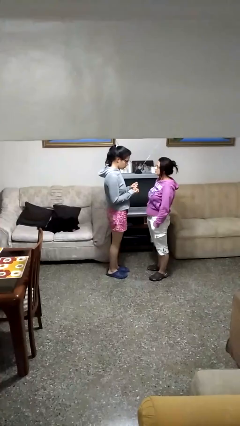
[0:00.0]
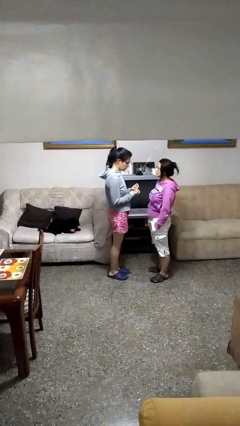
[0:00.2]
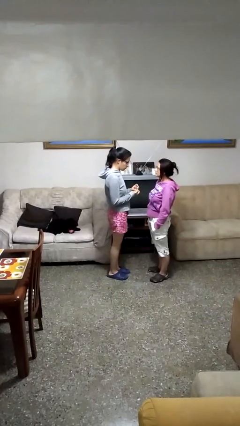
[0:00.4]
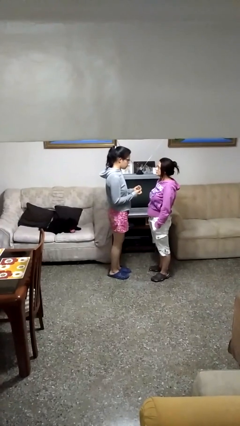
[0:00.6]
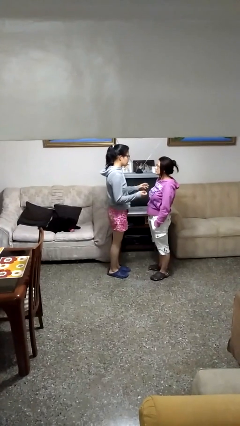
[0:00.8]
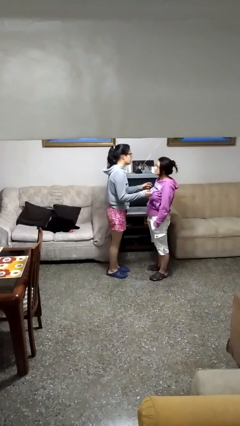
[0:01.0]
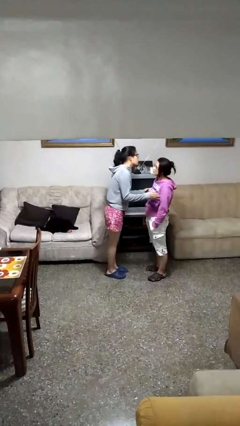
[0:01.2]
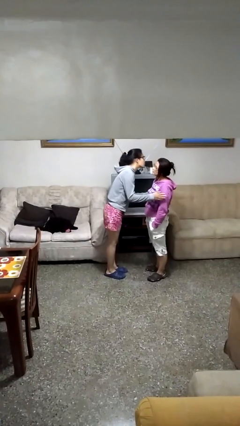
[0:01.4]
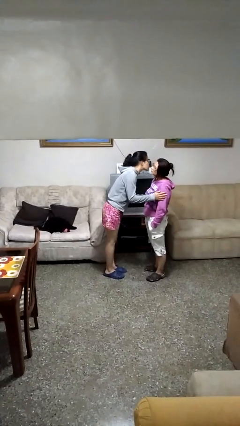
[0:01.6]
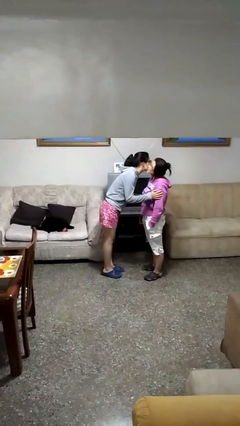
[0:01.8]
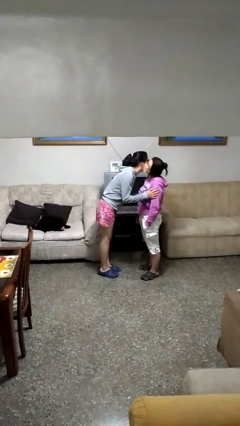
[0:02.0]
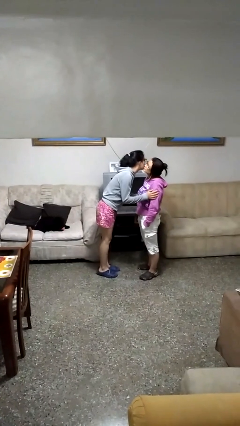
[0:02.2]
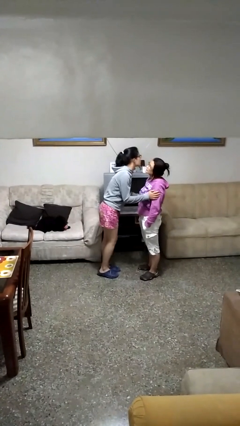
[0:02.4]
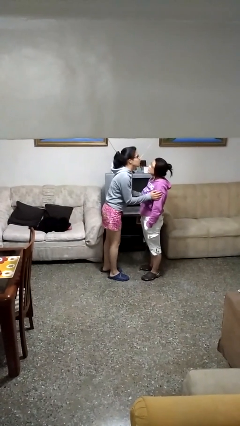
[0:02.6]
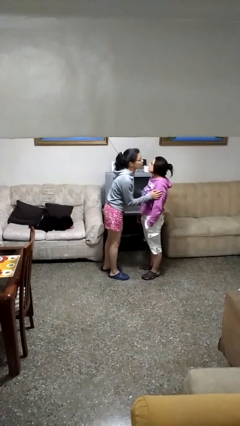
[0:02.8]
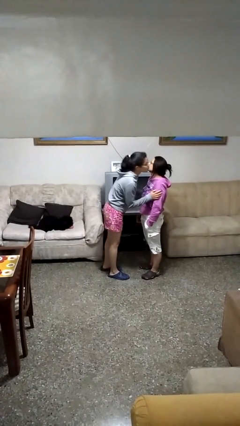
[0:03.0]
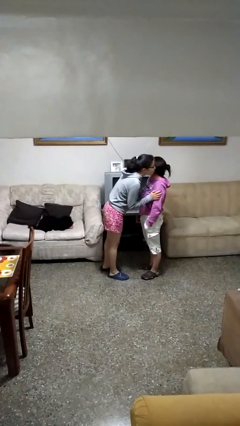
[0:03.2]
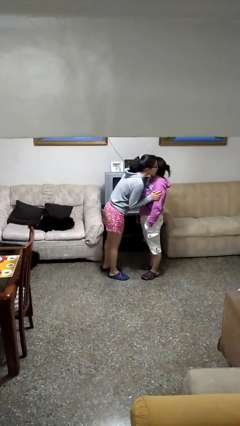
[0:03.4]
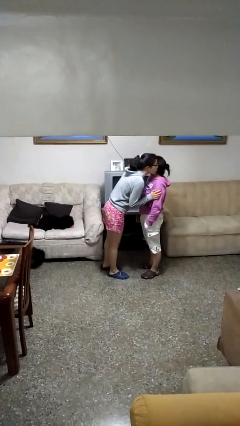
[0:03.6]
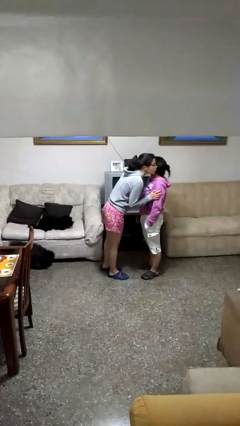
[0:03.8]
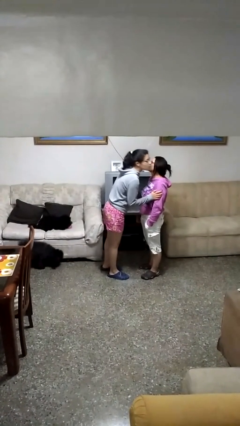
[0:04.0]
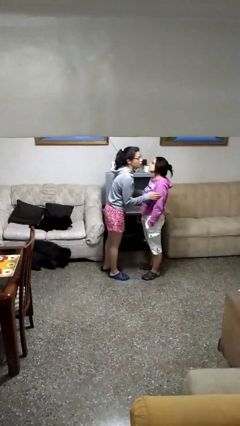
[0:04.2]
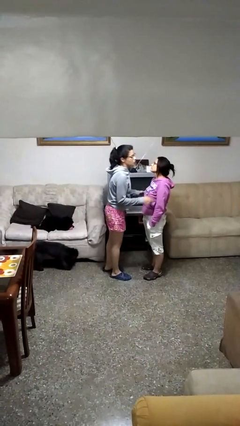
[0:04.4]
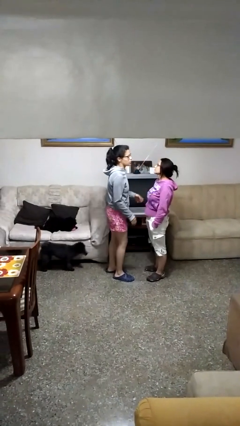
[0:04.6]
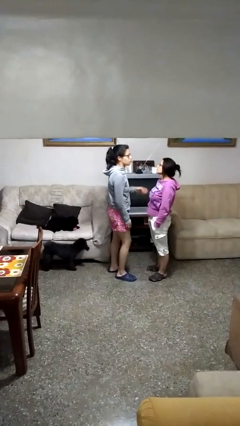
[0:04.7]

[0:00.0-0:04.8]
person kisses cheek of person

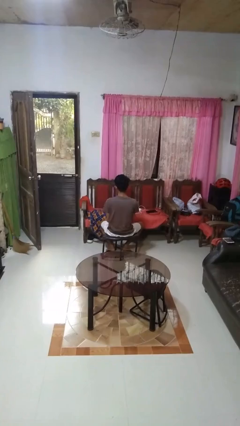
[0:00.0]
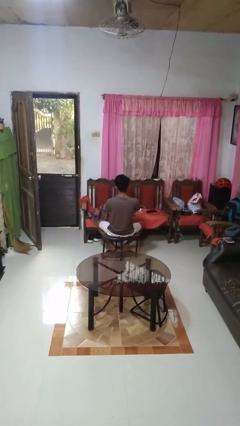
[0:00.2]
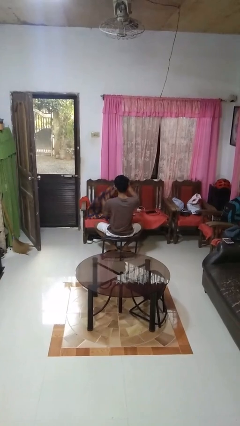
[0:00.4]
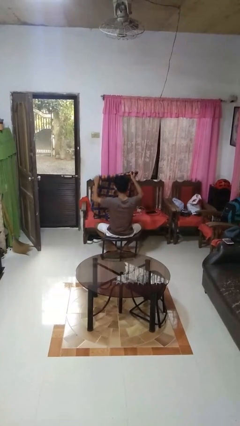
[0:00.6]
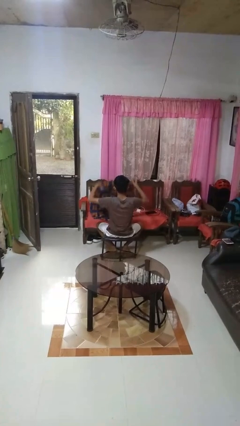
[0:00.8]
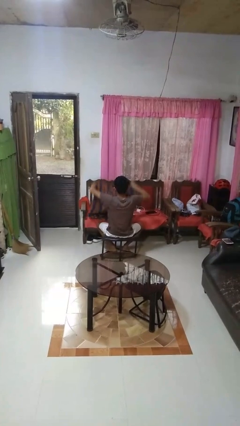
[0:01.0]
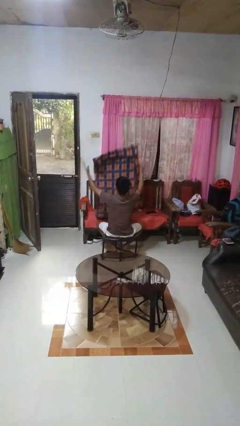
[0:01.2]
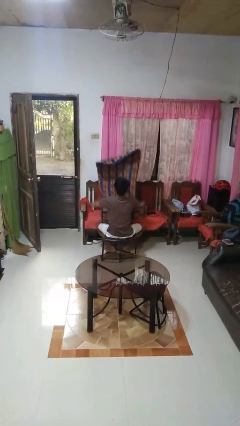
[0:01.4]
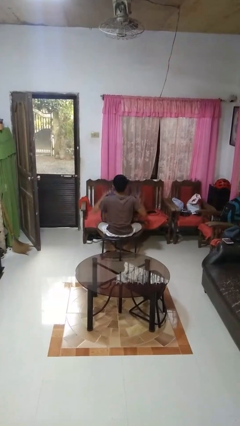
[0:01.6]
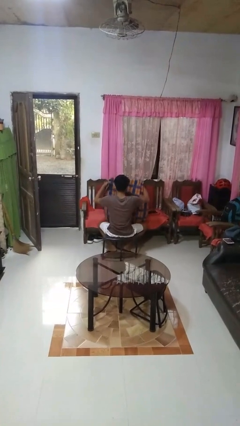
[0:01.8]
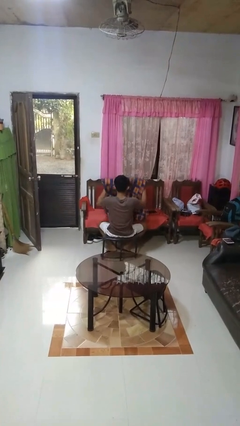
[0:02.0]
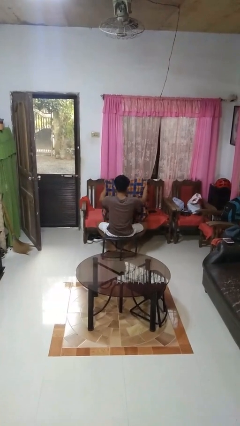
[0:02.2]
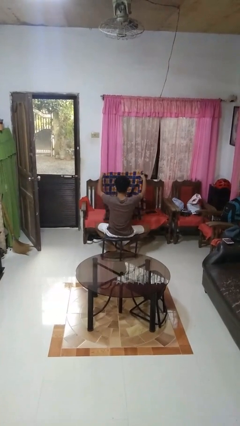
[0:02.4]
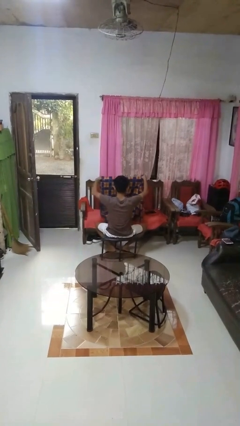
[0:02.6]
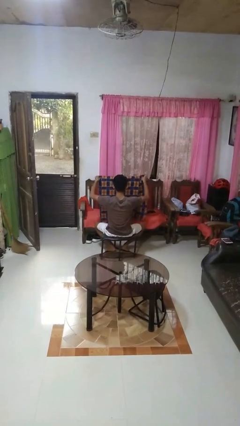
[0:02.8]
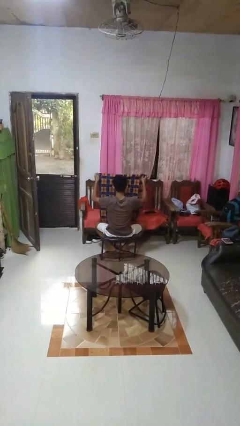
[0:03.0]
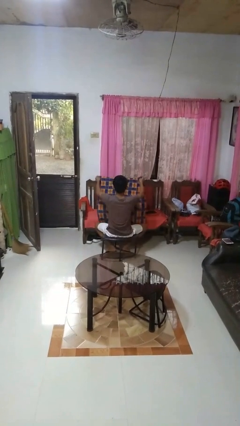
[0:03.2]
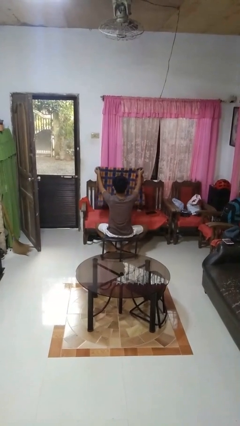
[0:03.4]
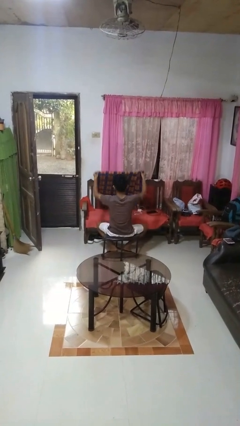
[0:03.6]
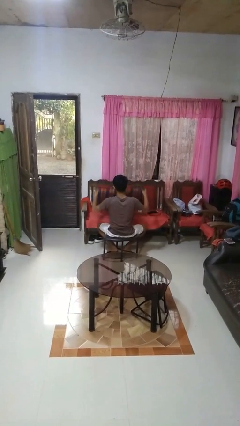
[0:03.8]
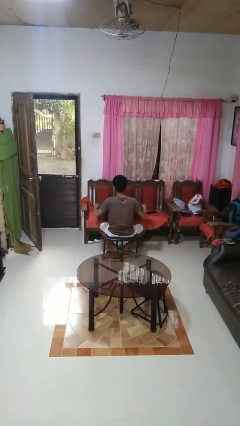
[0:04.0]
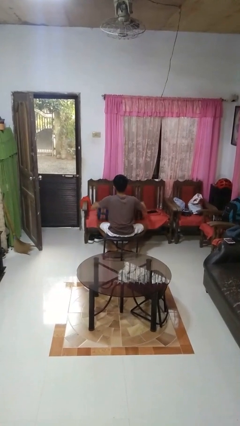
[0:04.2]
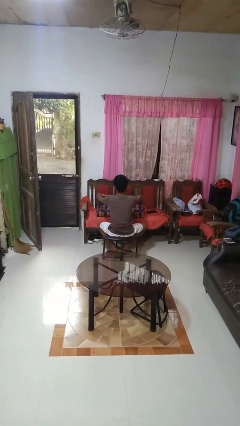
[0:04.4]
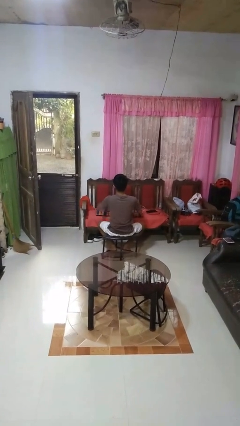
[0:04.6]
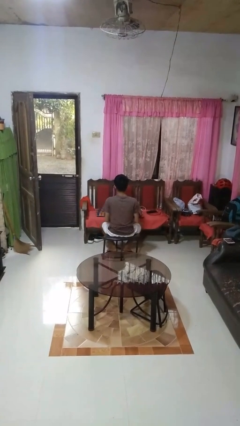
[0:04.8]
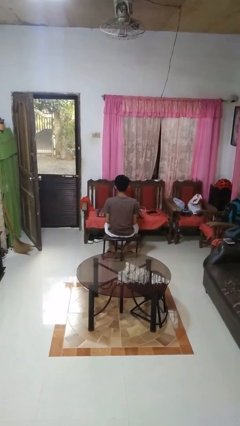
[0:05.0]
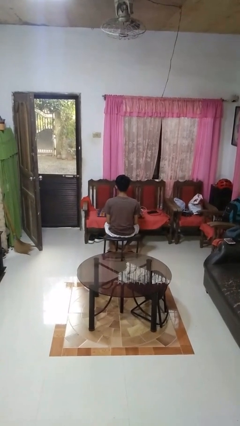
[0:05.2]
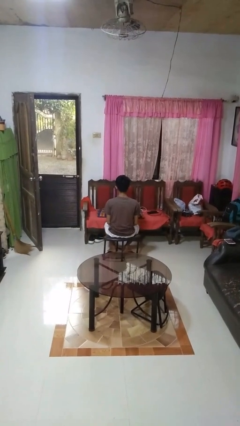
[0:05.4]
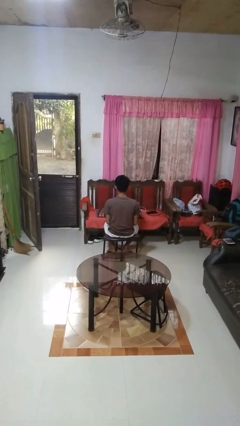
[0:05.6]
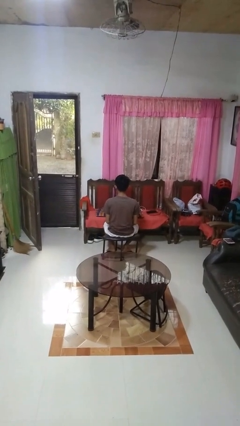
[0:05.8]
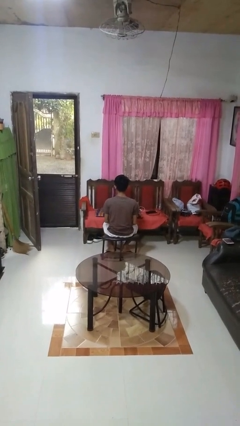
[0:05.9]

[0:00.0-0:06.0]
person folds blanket

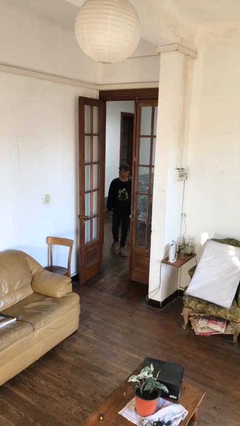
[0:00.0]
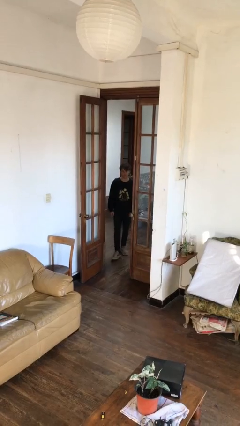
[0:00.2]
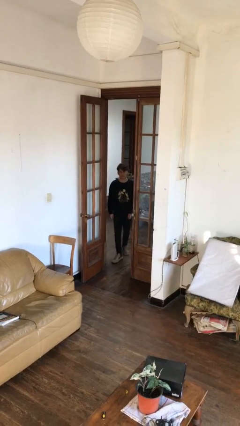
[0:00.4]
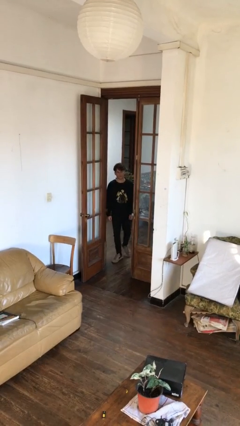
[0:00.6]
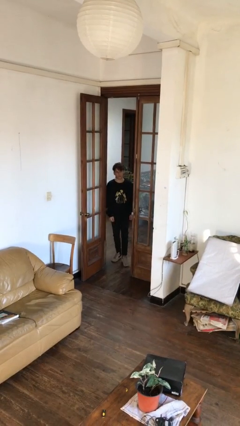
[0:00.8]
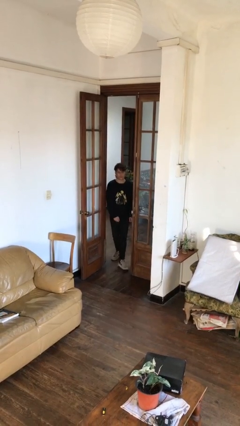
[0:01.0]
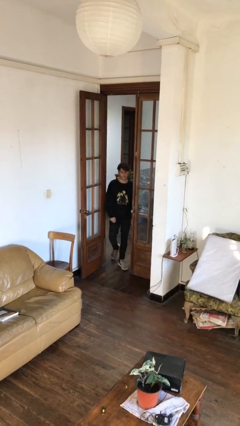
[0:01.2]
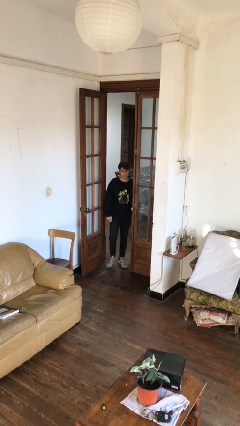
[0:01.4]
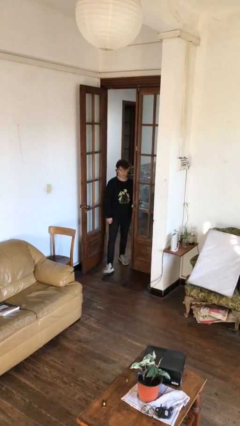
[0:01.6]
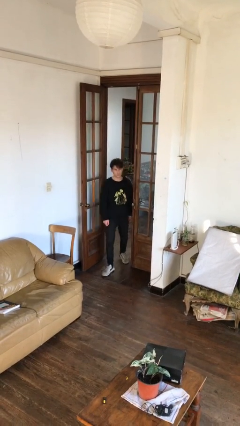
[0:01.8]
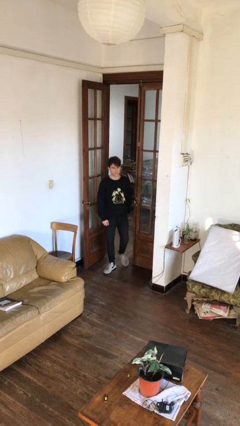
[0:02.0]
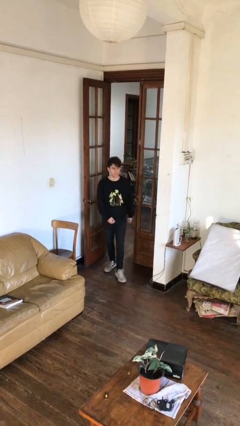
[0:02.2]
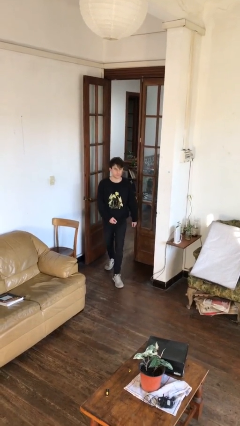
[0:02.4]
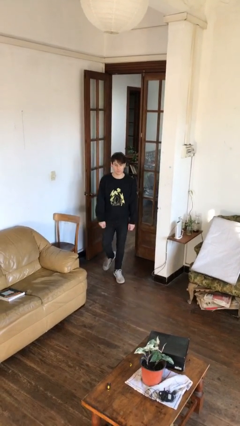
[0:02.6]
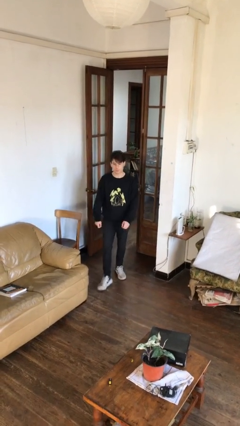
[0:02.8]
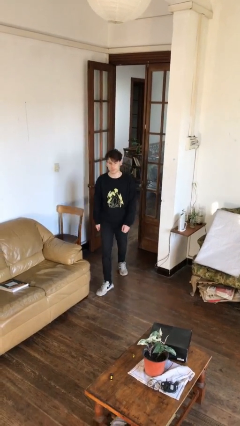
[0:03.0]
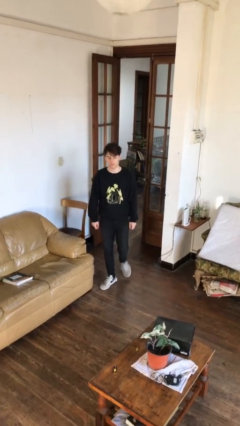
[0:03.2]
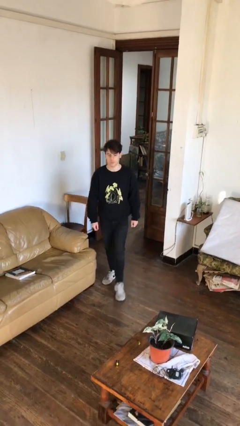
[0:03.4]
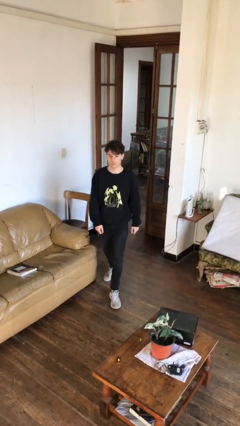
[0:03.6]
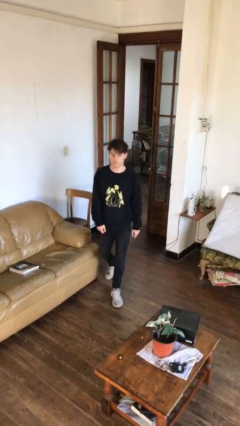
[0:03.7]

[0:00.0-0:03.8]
person enters scene through structure

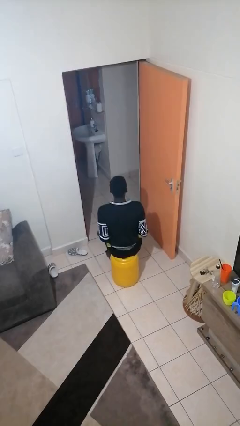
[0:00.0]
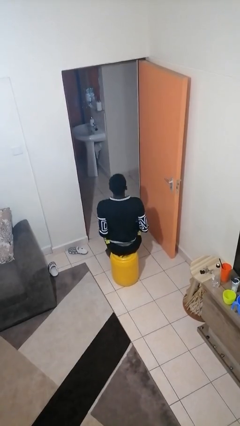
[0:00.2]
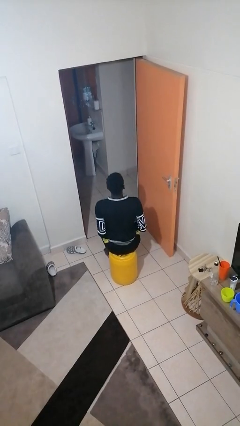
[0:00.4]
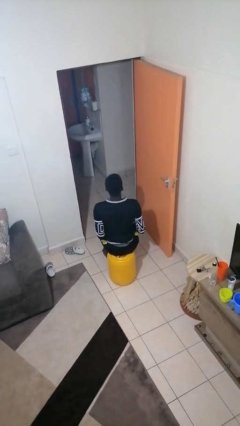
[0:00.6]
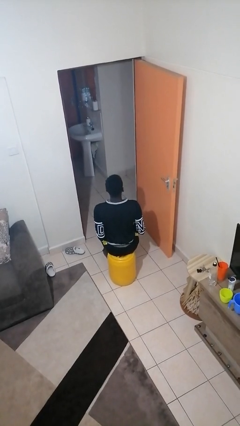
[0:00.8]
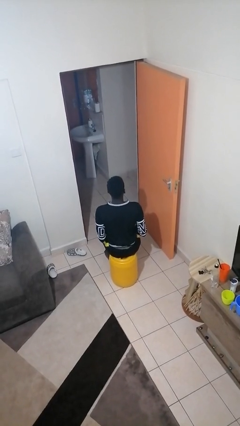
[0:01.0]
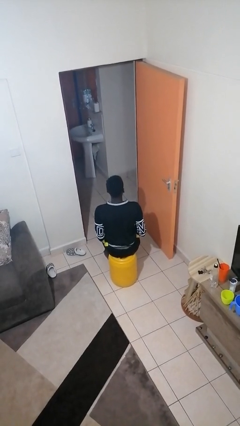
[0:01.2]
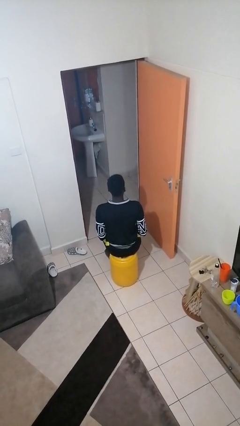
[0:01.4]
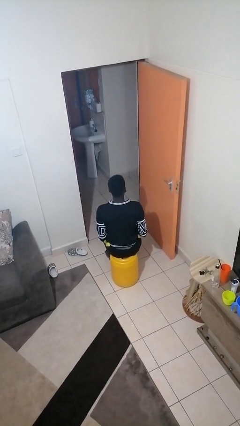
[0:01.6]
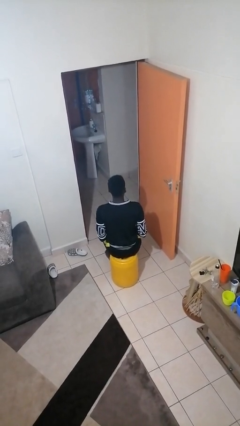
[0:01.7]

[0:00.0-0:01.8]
person slaps hands on thighs

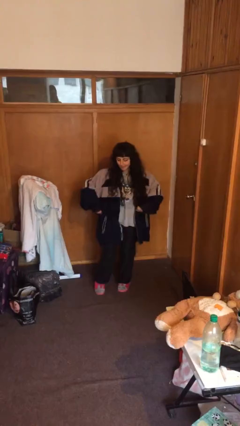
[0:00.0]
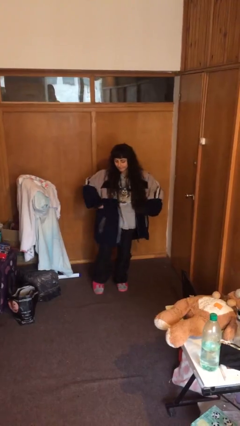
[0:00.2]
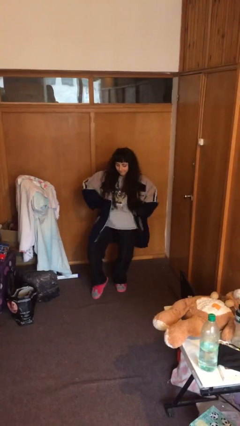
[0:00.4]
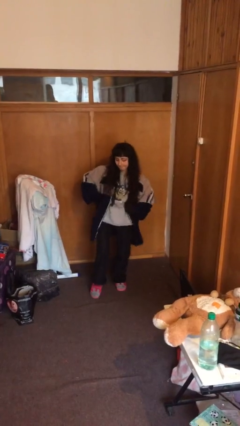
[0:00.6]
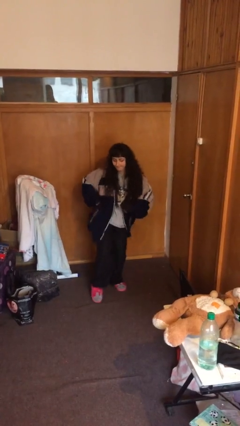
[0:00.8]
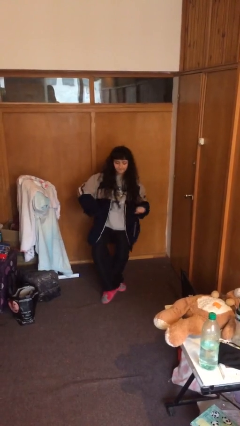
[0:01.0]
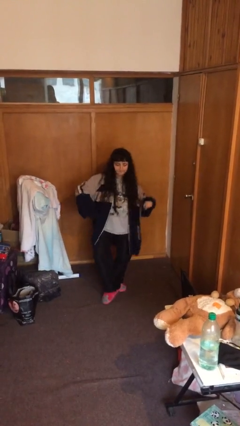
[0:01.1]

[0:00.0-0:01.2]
person dances in place

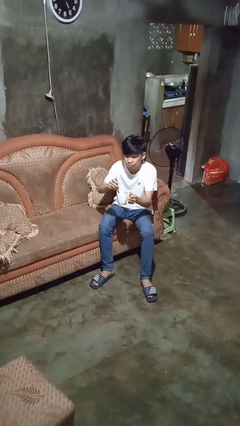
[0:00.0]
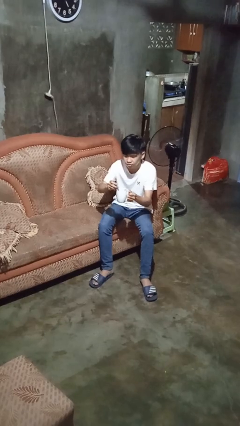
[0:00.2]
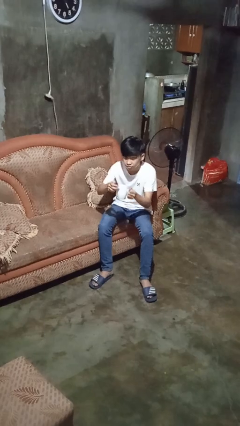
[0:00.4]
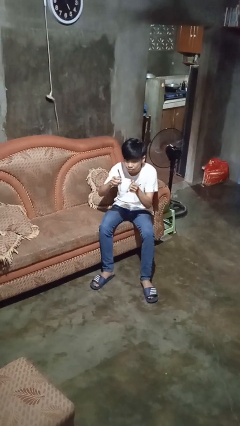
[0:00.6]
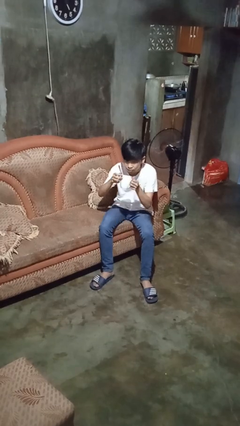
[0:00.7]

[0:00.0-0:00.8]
person drinks from mug
